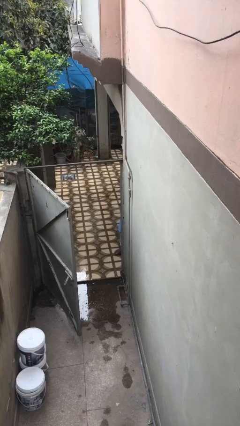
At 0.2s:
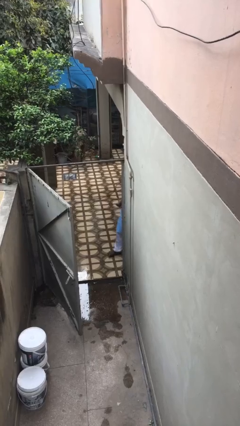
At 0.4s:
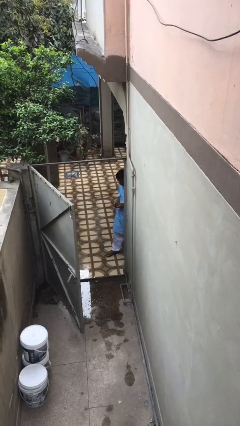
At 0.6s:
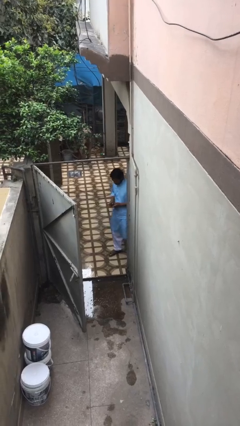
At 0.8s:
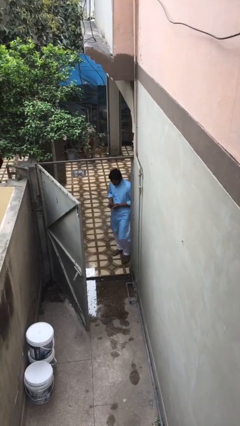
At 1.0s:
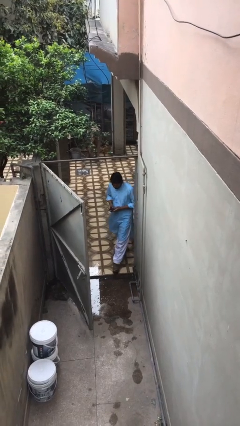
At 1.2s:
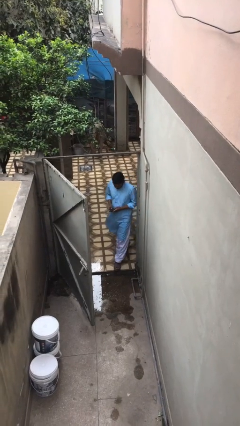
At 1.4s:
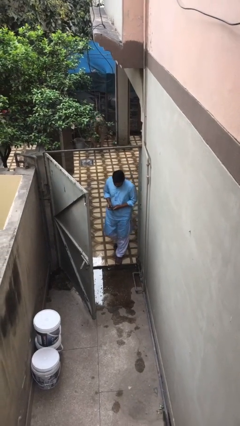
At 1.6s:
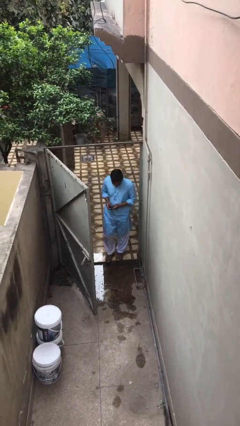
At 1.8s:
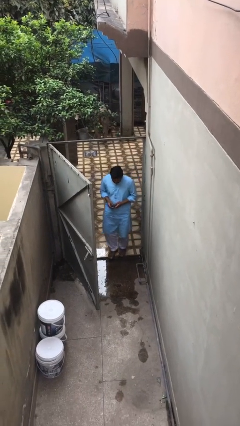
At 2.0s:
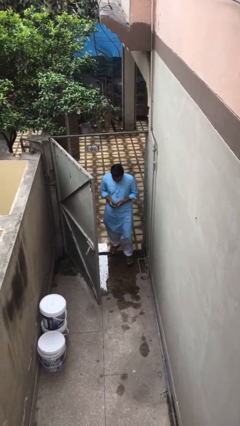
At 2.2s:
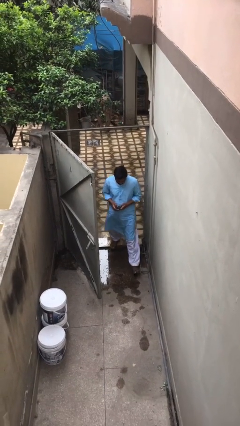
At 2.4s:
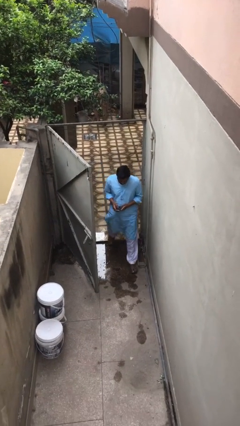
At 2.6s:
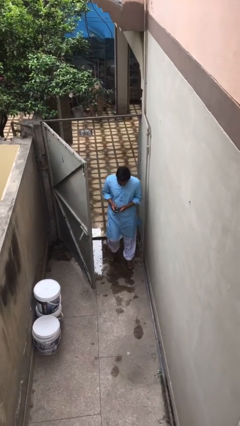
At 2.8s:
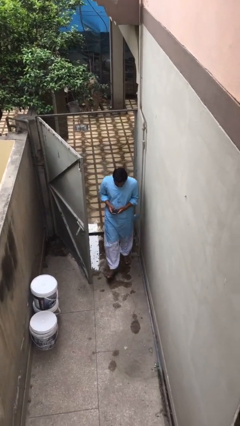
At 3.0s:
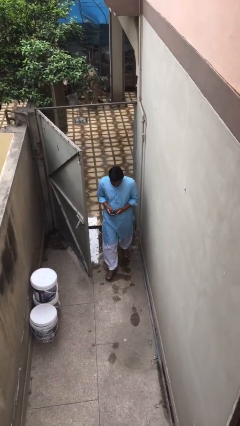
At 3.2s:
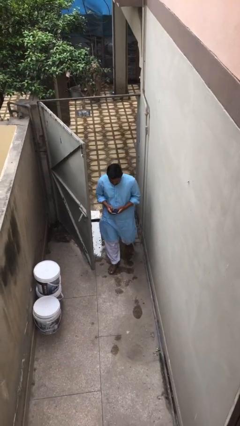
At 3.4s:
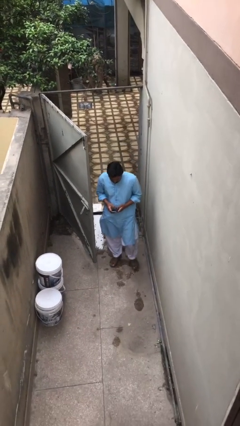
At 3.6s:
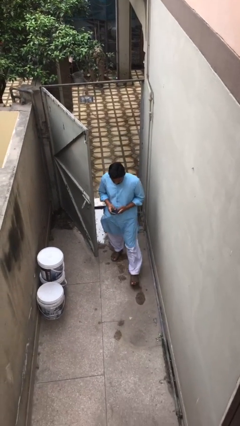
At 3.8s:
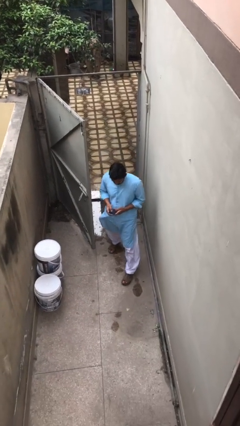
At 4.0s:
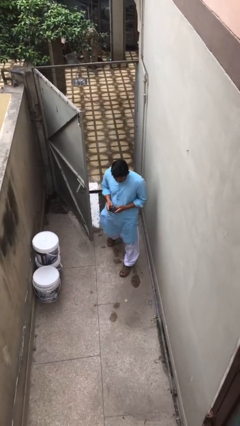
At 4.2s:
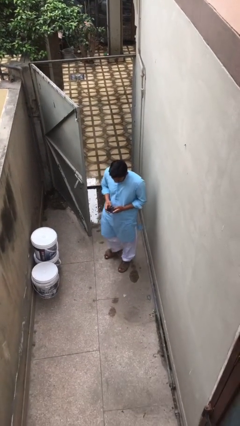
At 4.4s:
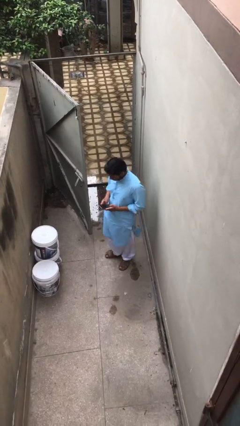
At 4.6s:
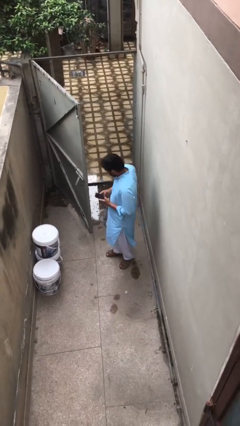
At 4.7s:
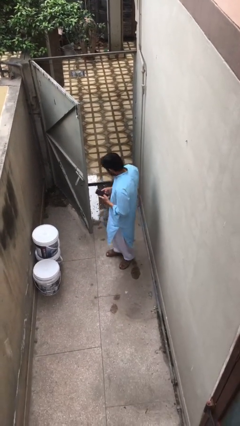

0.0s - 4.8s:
person enters scene through structure

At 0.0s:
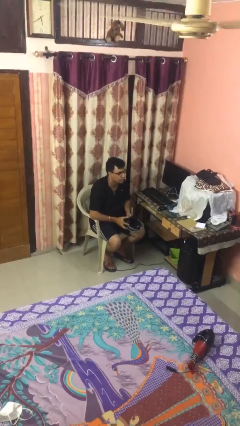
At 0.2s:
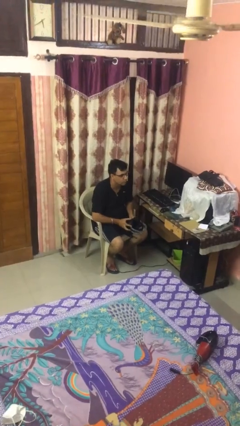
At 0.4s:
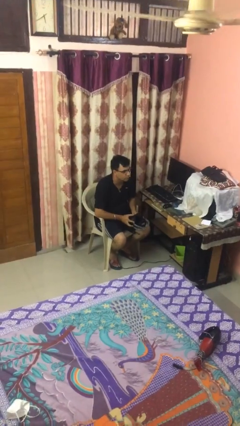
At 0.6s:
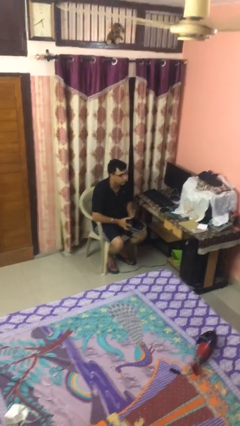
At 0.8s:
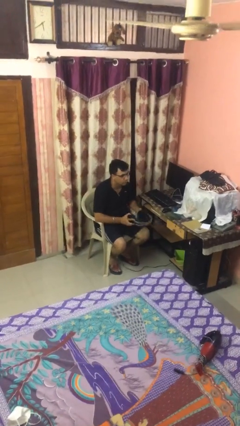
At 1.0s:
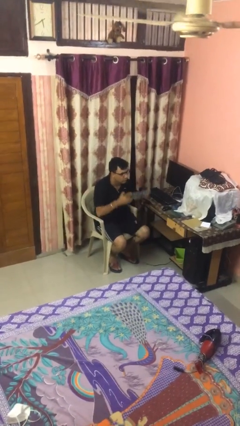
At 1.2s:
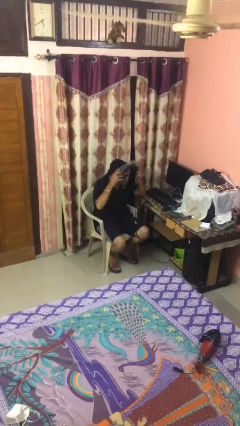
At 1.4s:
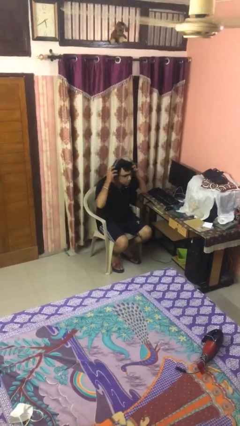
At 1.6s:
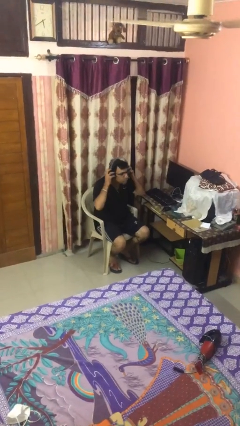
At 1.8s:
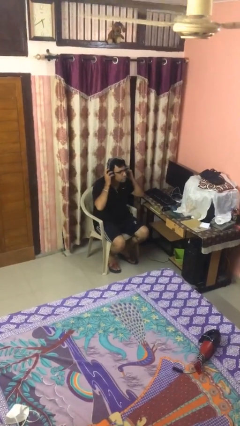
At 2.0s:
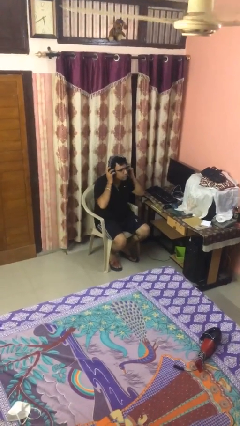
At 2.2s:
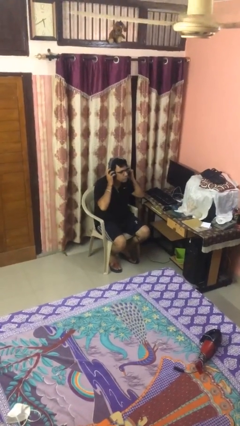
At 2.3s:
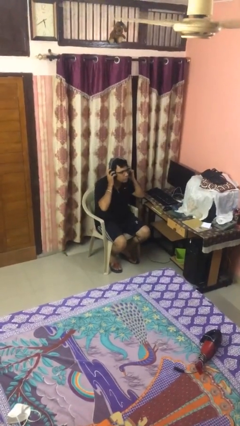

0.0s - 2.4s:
person puts on headphones

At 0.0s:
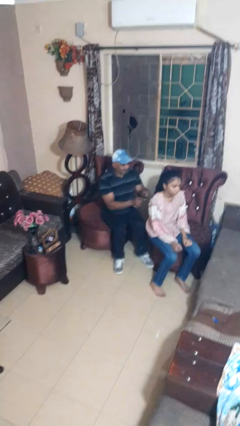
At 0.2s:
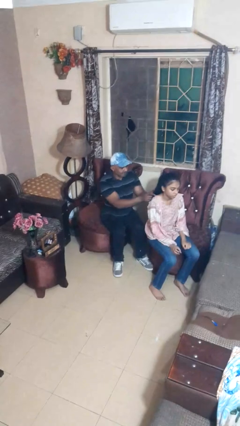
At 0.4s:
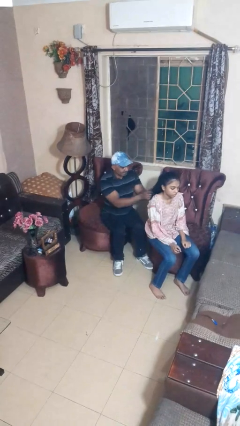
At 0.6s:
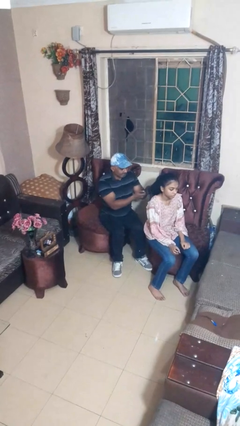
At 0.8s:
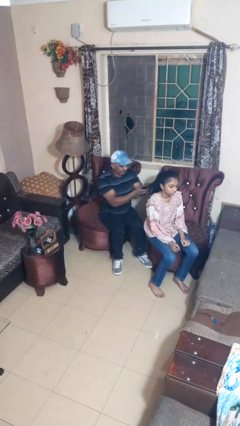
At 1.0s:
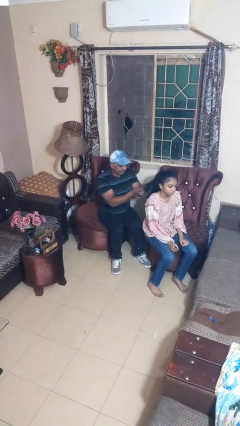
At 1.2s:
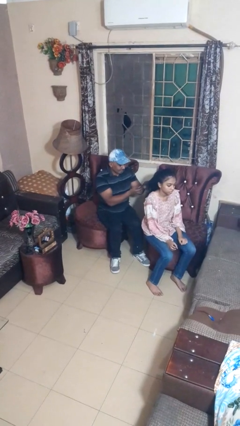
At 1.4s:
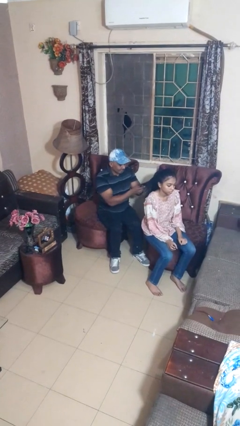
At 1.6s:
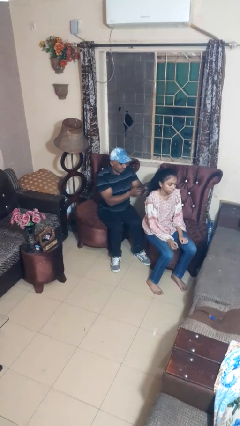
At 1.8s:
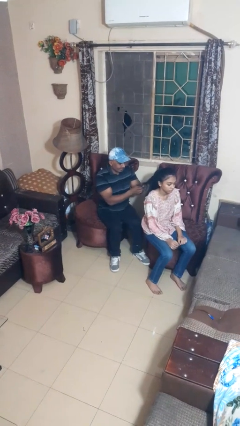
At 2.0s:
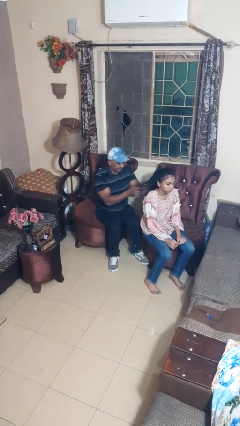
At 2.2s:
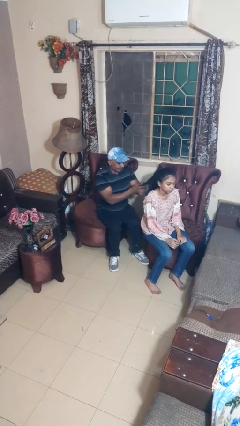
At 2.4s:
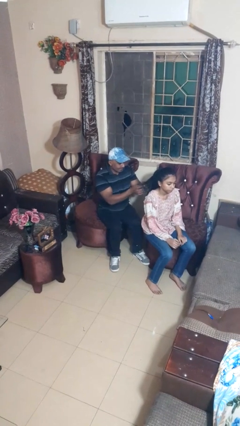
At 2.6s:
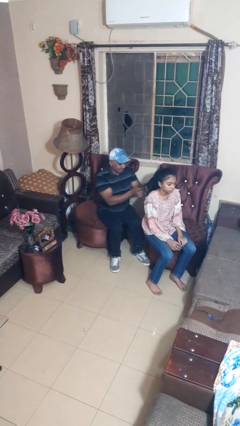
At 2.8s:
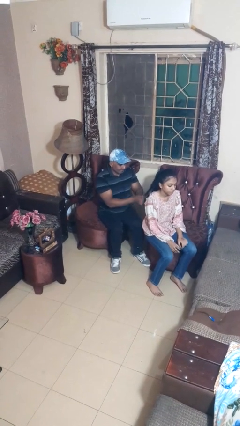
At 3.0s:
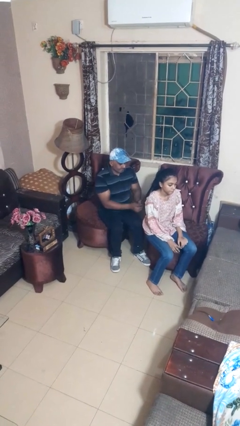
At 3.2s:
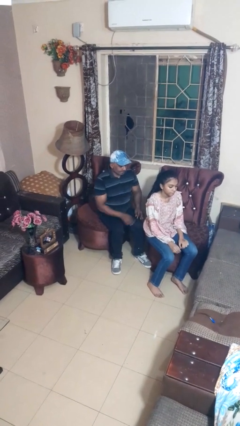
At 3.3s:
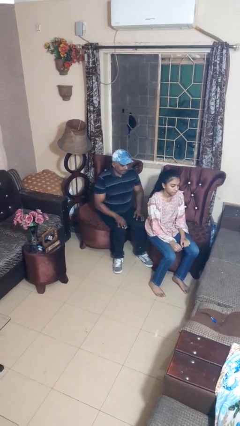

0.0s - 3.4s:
person braids hair of person

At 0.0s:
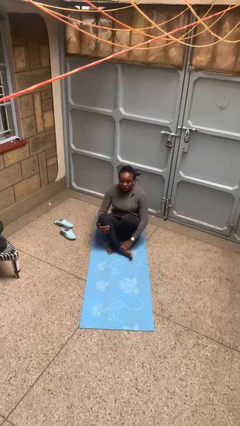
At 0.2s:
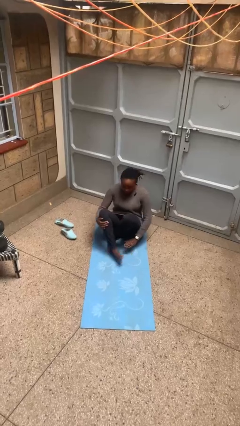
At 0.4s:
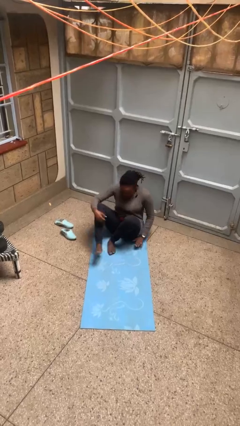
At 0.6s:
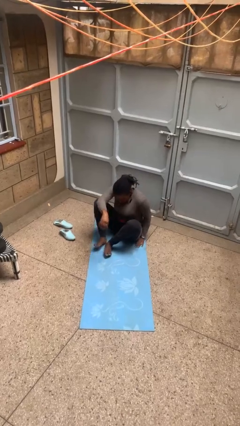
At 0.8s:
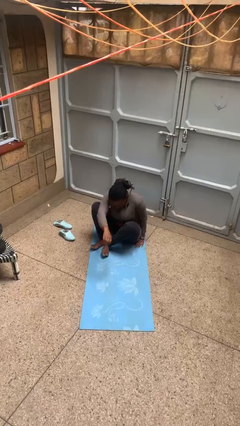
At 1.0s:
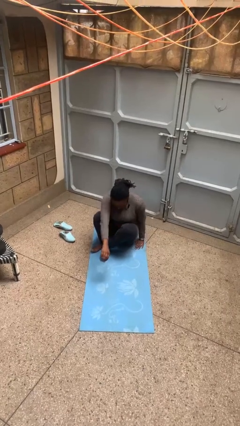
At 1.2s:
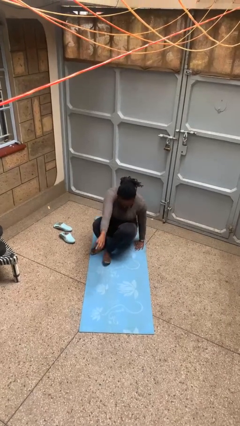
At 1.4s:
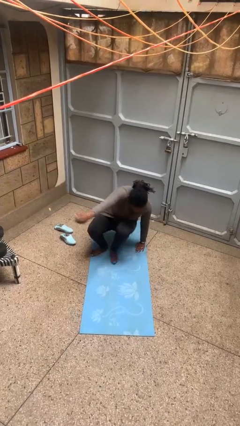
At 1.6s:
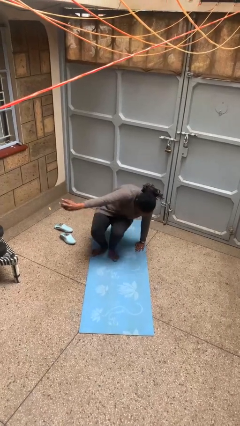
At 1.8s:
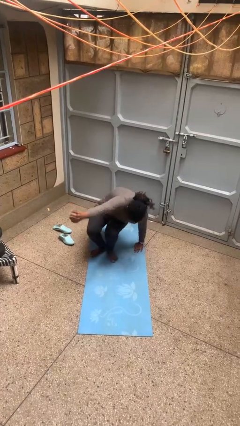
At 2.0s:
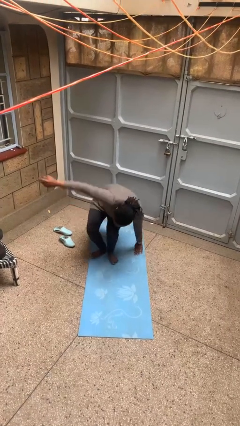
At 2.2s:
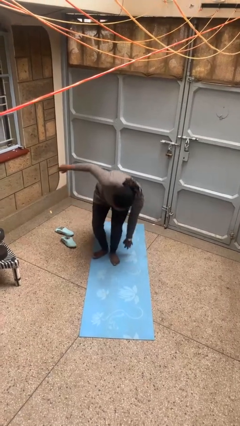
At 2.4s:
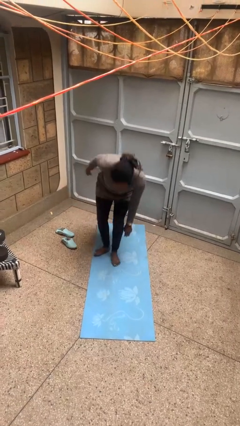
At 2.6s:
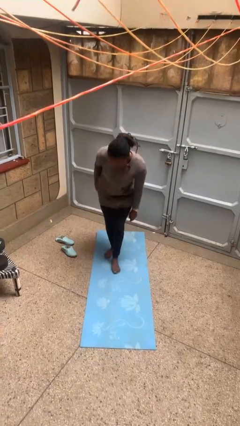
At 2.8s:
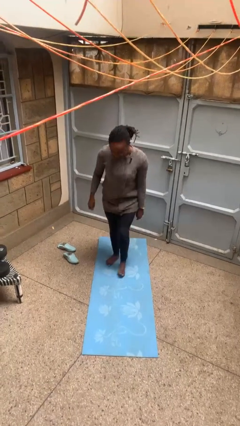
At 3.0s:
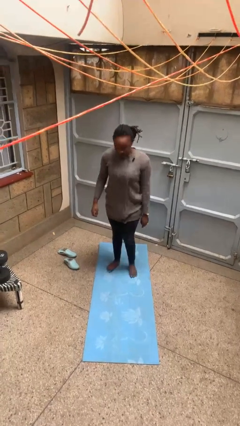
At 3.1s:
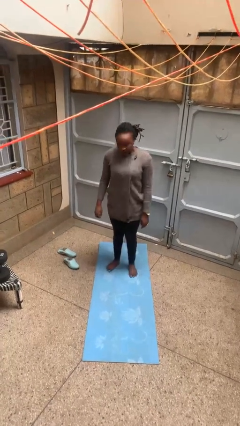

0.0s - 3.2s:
person stands up from floor

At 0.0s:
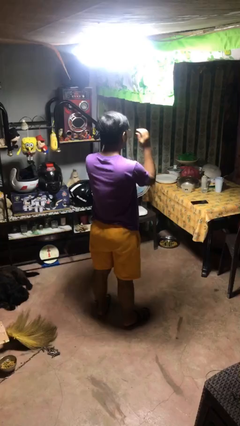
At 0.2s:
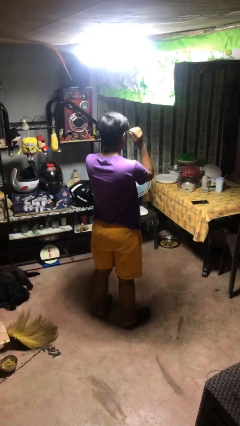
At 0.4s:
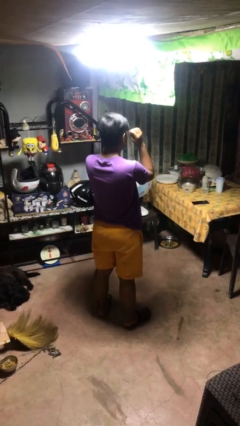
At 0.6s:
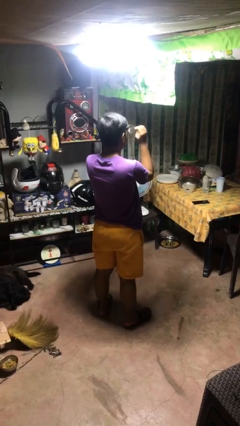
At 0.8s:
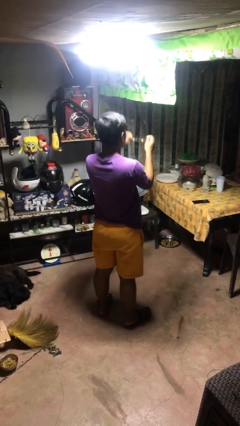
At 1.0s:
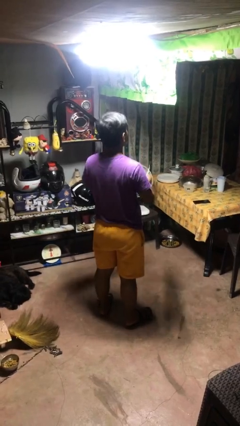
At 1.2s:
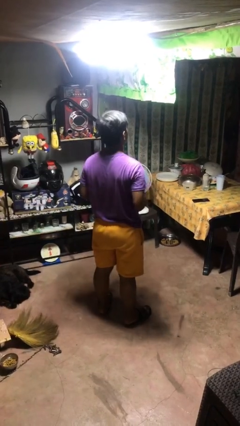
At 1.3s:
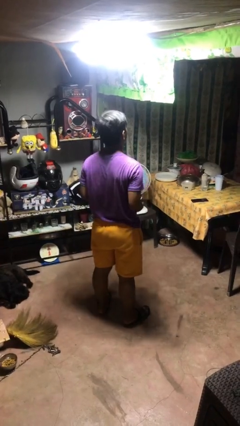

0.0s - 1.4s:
person takes off glasses

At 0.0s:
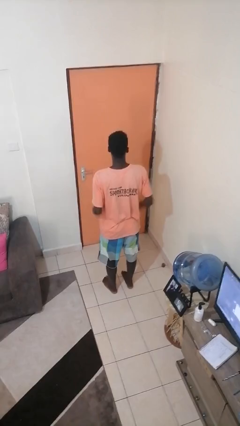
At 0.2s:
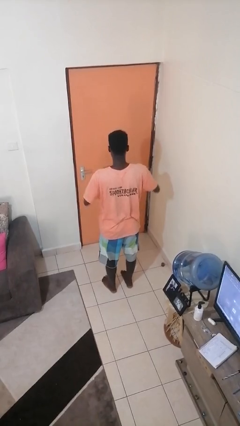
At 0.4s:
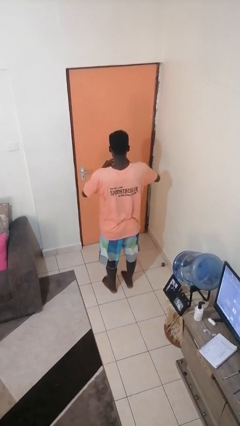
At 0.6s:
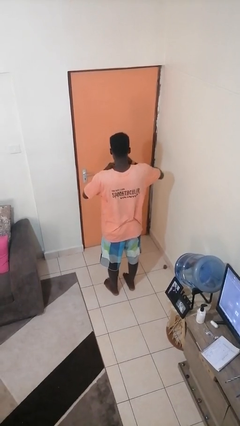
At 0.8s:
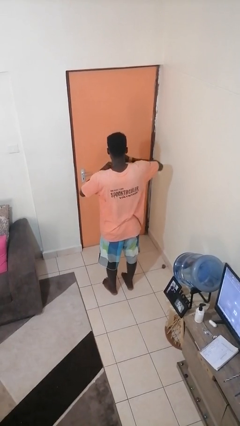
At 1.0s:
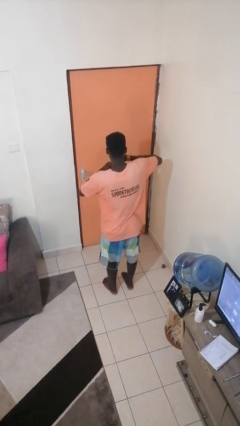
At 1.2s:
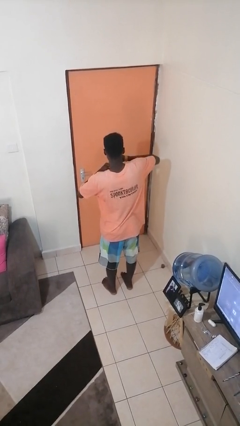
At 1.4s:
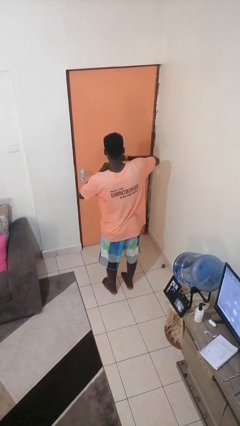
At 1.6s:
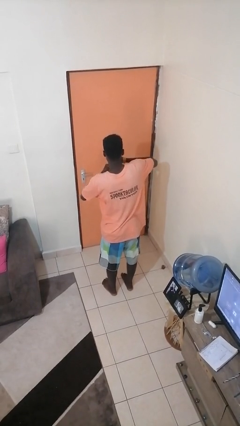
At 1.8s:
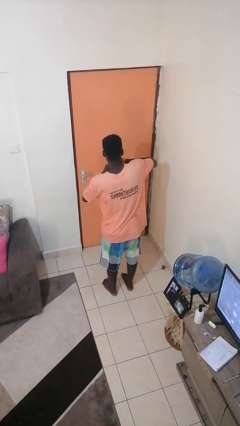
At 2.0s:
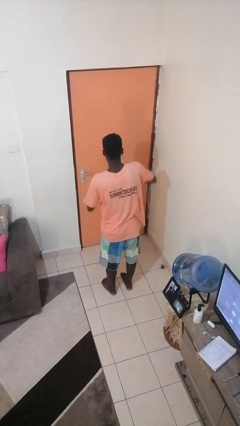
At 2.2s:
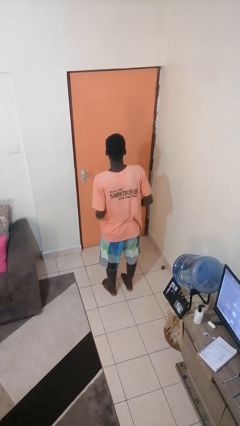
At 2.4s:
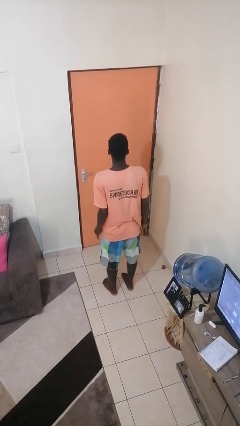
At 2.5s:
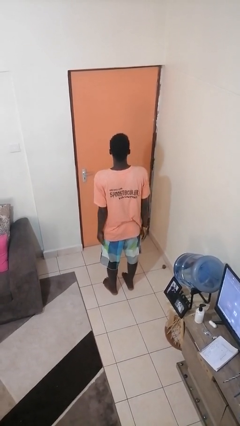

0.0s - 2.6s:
person puts on ring
